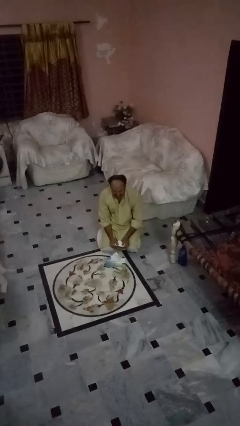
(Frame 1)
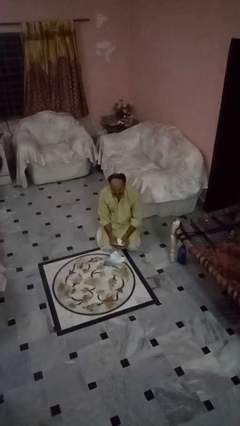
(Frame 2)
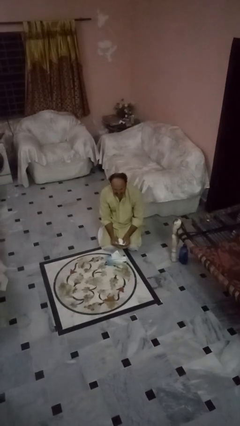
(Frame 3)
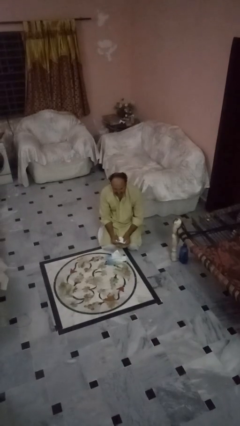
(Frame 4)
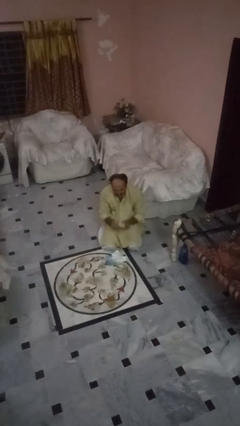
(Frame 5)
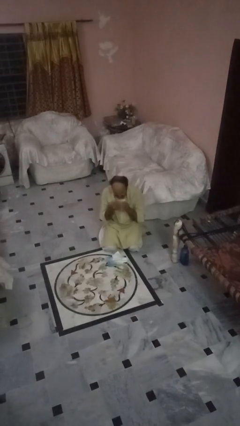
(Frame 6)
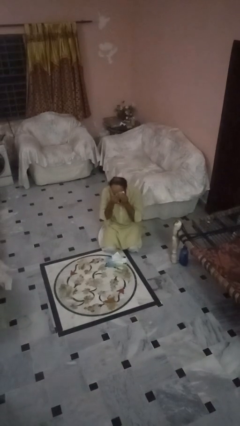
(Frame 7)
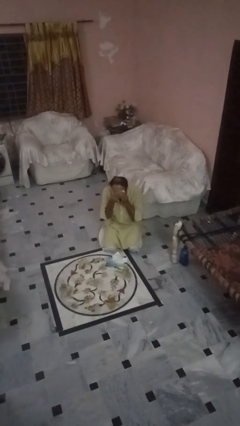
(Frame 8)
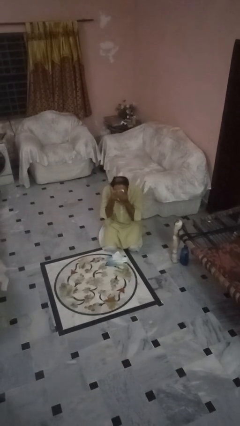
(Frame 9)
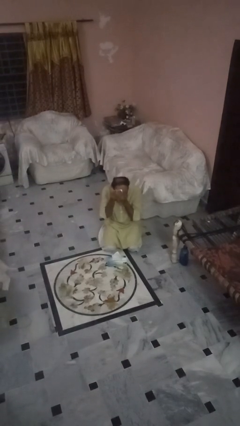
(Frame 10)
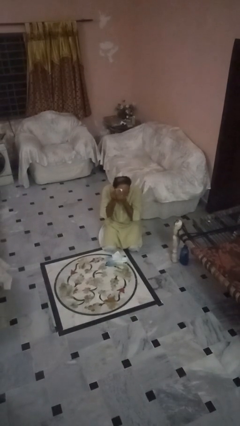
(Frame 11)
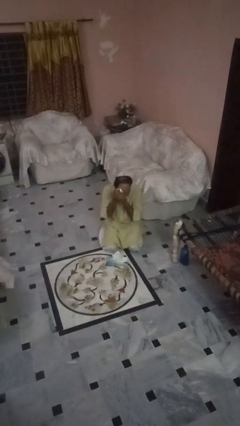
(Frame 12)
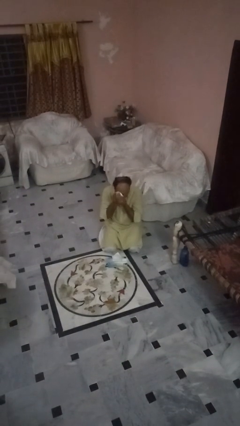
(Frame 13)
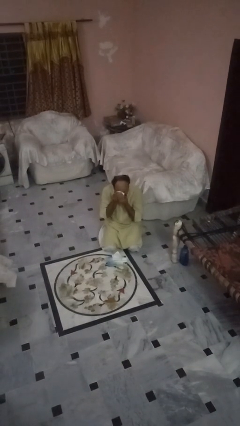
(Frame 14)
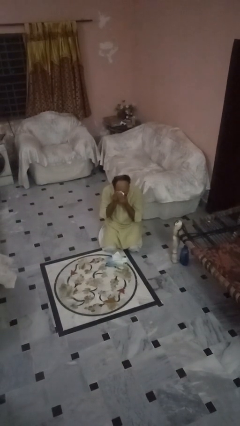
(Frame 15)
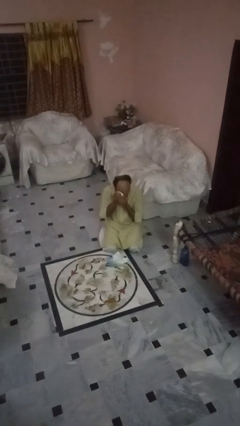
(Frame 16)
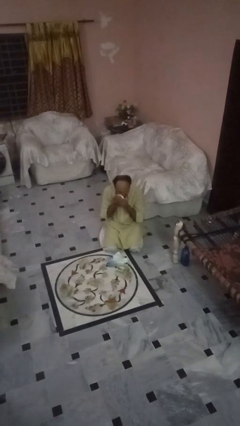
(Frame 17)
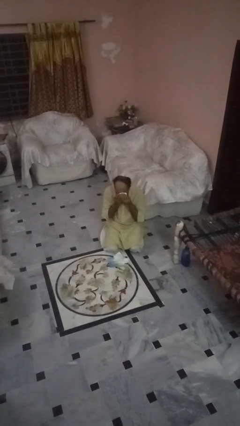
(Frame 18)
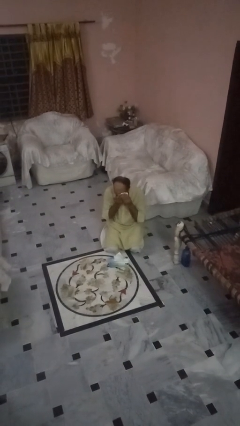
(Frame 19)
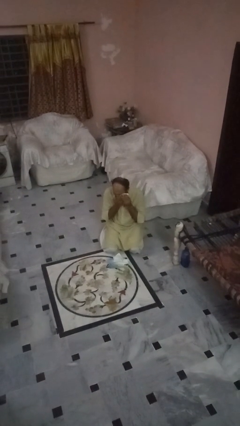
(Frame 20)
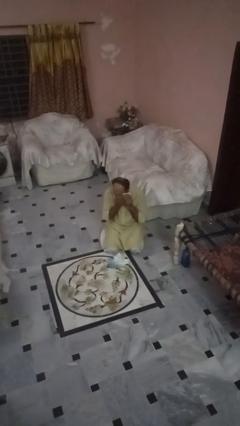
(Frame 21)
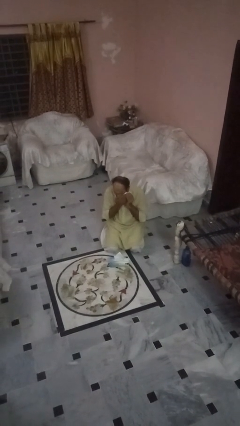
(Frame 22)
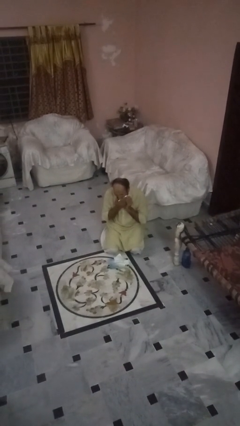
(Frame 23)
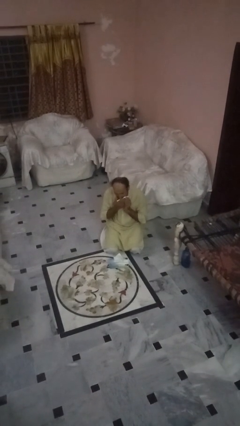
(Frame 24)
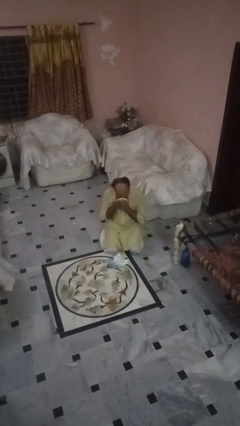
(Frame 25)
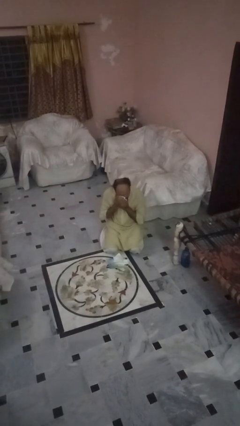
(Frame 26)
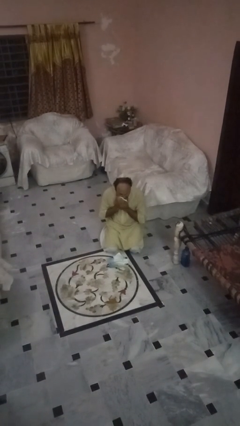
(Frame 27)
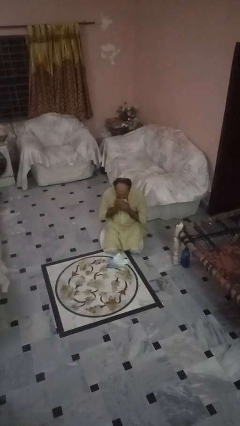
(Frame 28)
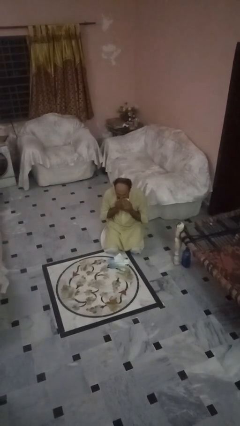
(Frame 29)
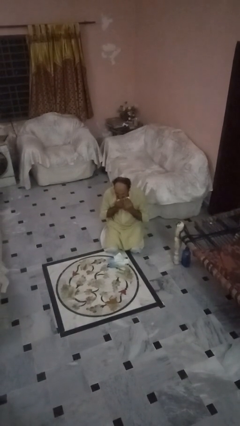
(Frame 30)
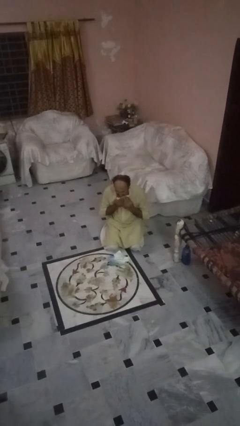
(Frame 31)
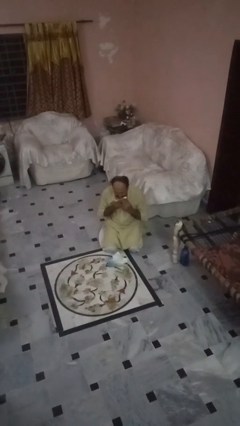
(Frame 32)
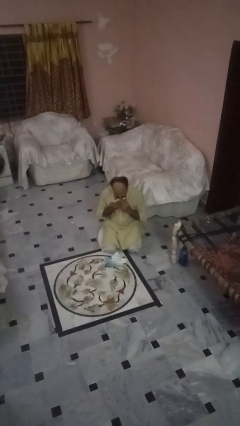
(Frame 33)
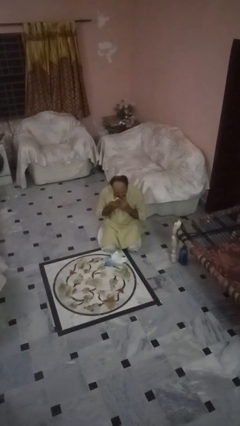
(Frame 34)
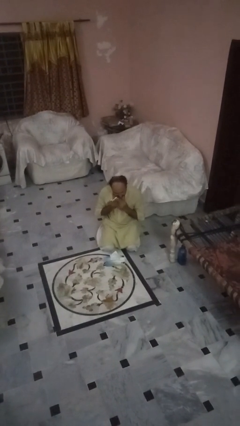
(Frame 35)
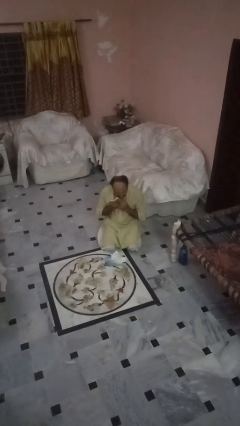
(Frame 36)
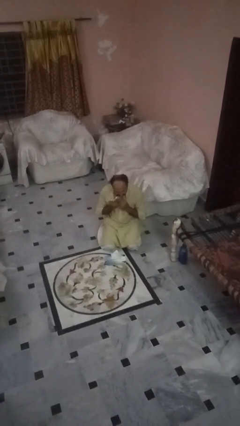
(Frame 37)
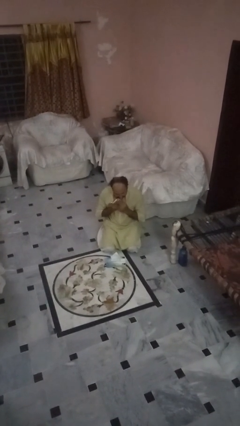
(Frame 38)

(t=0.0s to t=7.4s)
person wipes mouth with napkin

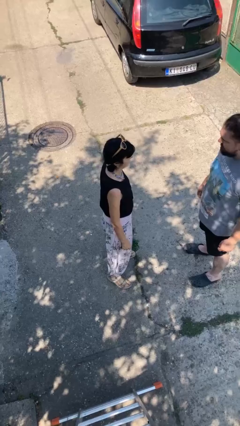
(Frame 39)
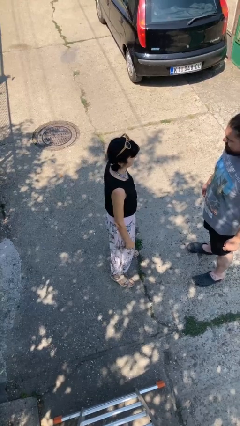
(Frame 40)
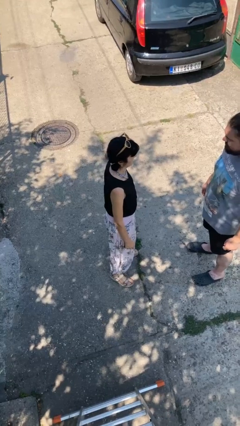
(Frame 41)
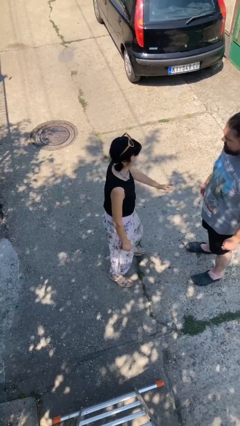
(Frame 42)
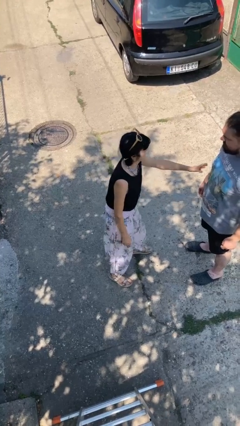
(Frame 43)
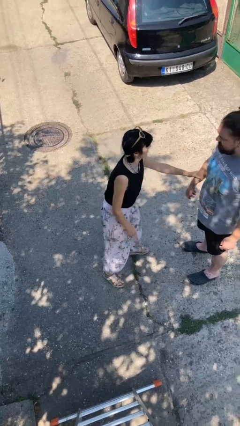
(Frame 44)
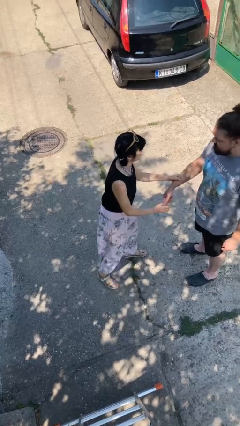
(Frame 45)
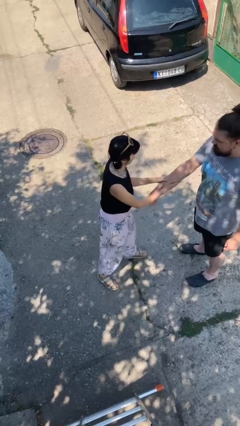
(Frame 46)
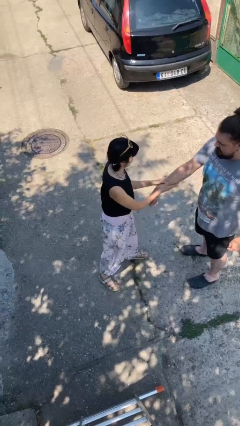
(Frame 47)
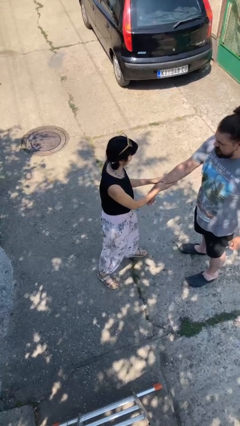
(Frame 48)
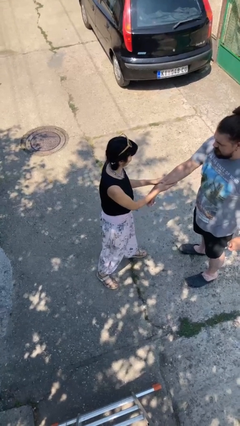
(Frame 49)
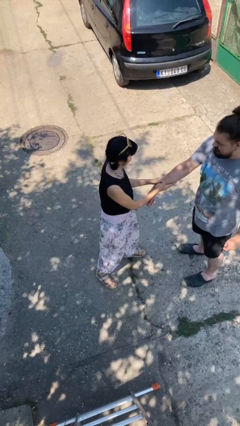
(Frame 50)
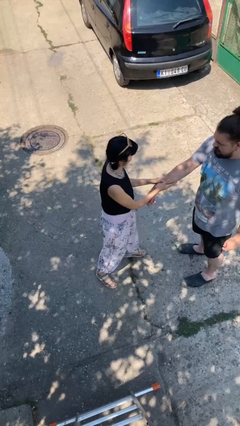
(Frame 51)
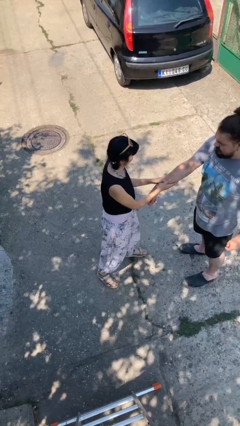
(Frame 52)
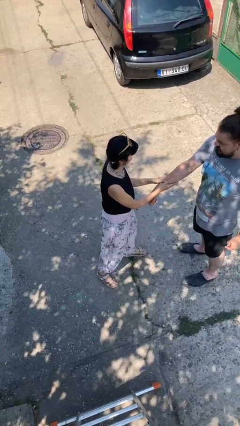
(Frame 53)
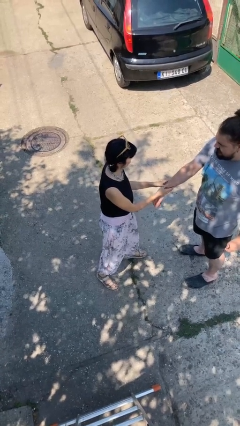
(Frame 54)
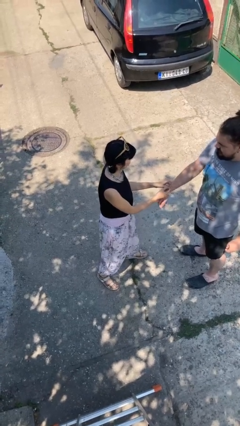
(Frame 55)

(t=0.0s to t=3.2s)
person grabs person by forearm

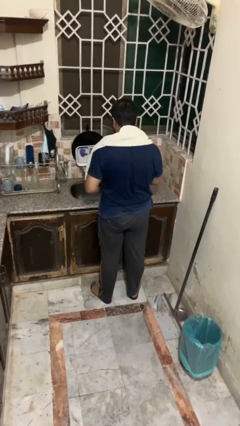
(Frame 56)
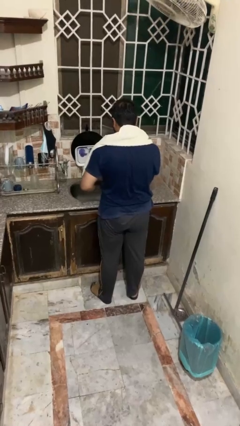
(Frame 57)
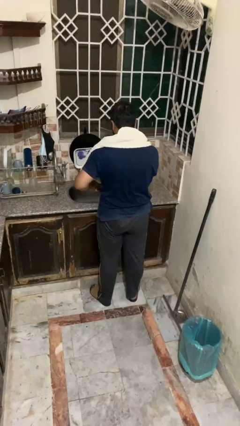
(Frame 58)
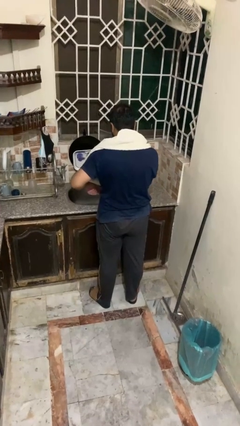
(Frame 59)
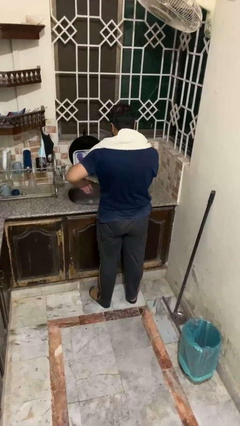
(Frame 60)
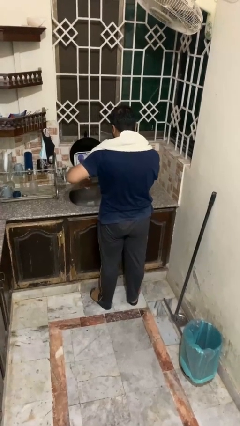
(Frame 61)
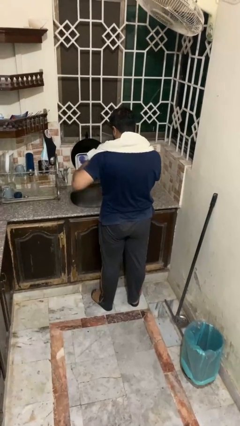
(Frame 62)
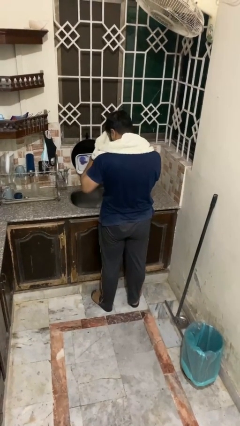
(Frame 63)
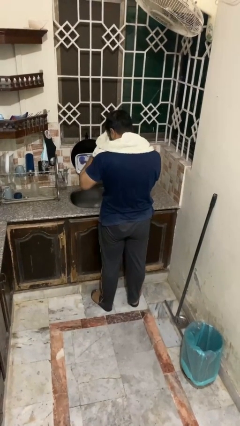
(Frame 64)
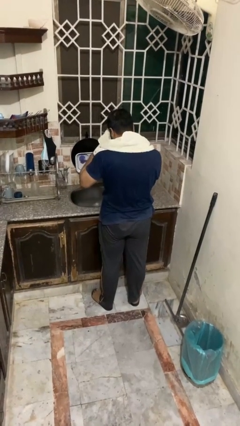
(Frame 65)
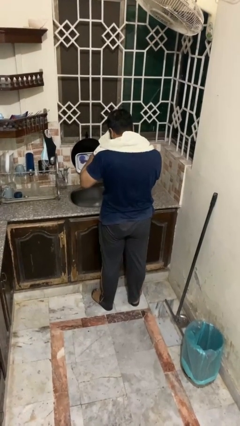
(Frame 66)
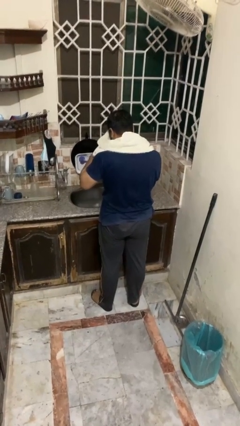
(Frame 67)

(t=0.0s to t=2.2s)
person dries face with towel

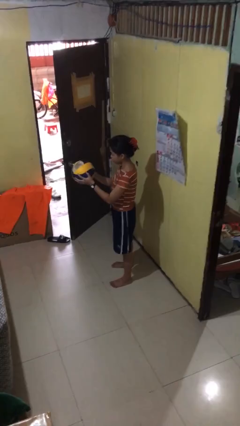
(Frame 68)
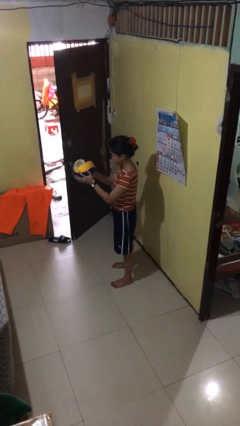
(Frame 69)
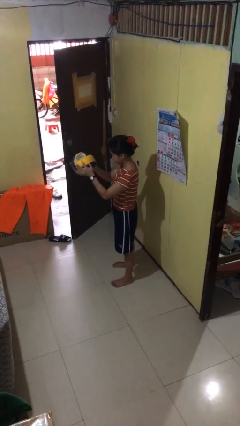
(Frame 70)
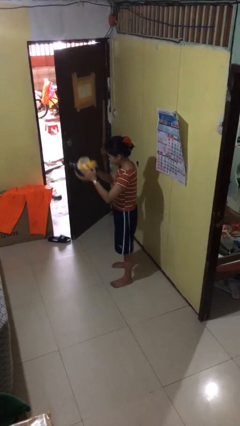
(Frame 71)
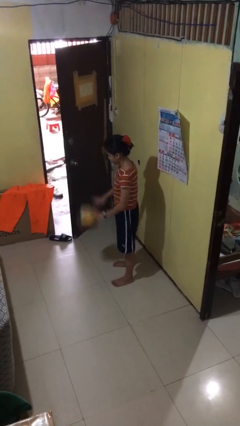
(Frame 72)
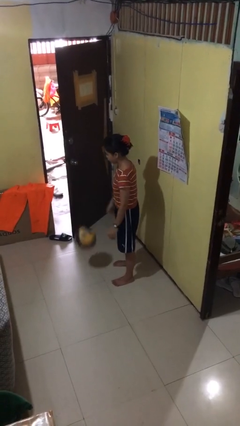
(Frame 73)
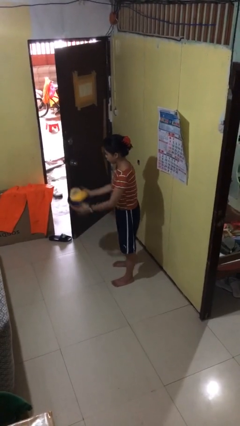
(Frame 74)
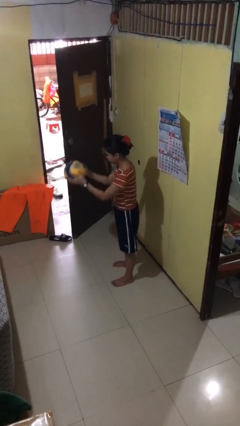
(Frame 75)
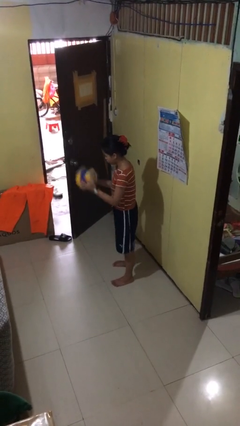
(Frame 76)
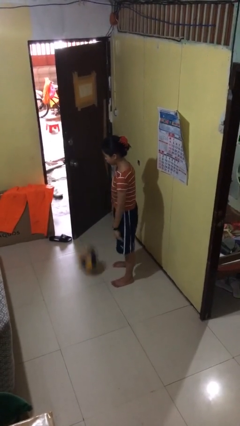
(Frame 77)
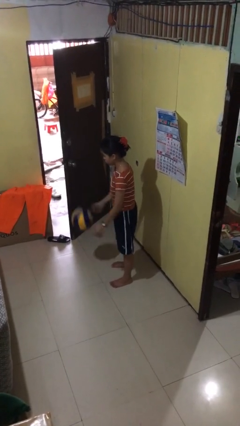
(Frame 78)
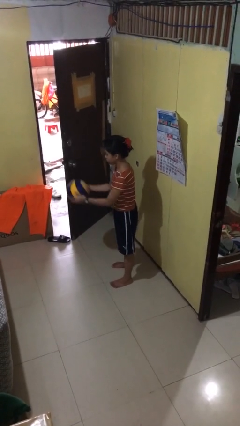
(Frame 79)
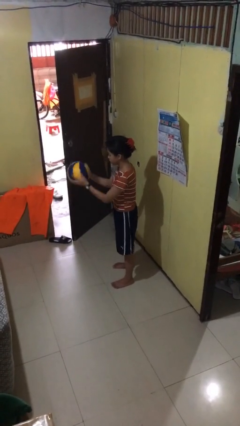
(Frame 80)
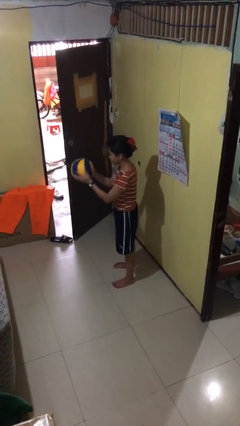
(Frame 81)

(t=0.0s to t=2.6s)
person bounces ball on floor

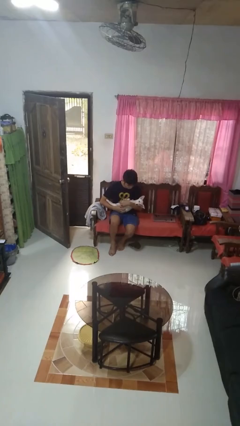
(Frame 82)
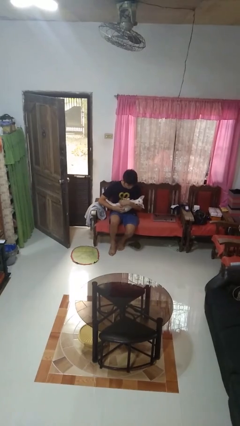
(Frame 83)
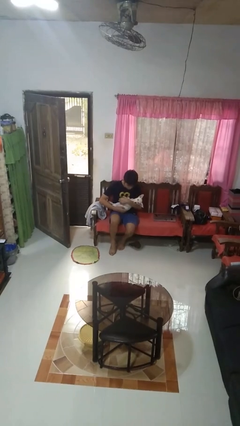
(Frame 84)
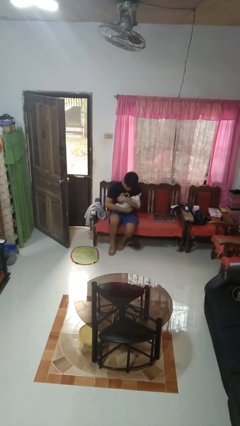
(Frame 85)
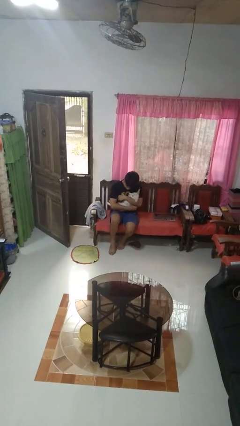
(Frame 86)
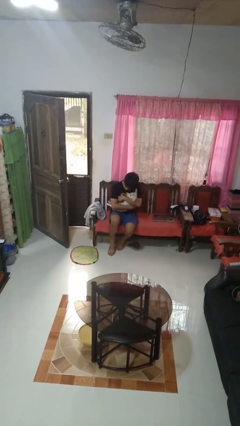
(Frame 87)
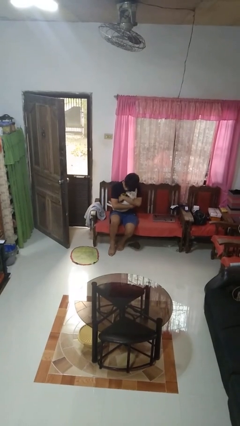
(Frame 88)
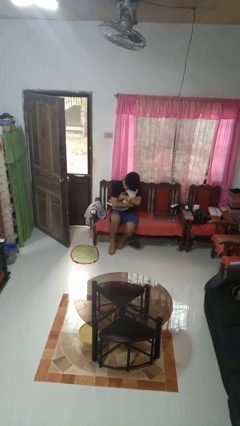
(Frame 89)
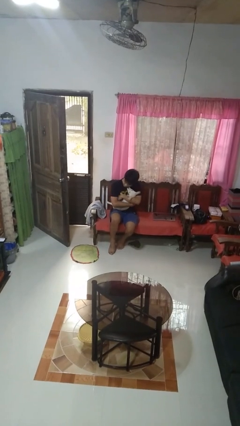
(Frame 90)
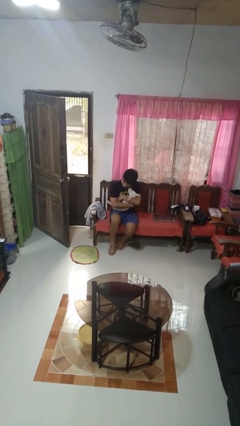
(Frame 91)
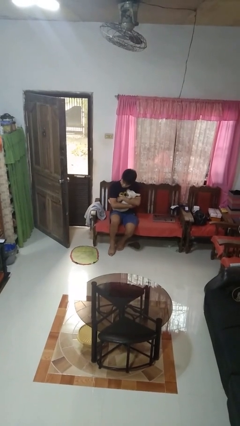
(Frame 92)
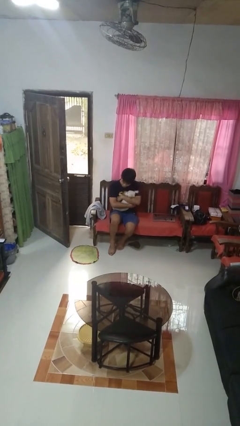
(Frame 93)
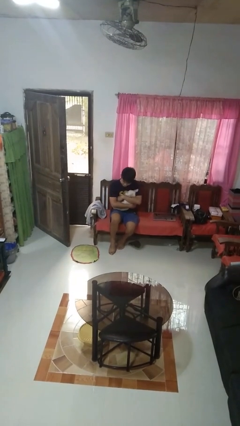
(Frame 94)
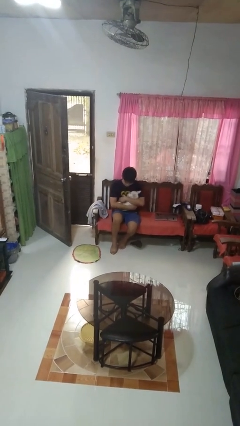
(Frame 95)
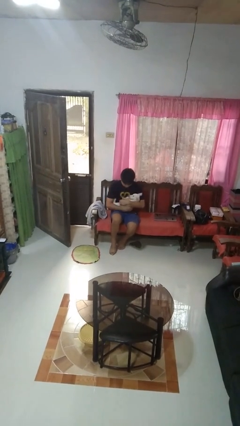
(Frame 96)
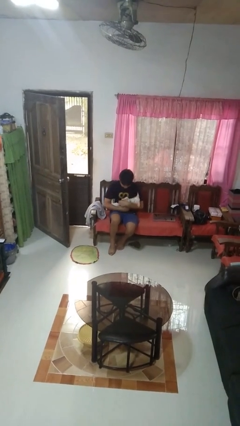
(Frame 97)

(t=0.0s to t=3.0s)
person hugs dog
